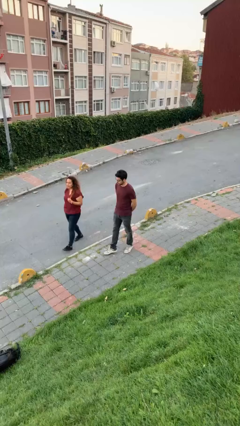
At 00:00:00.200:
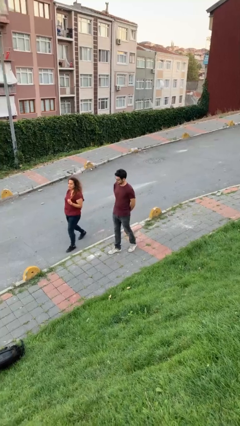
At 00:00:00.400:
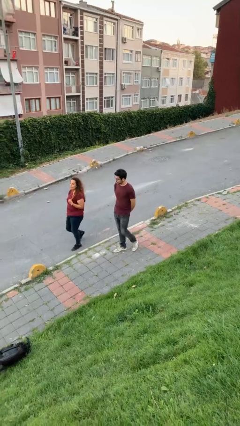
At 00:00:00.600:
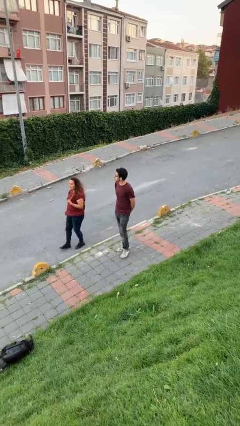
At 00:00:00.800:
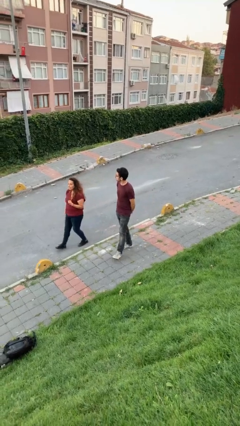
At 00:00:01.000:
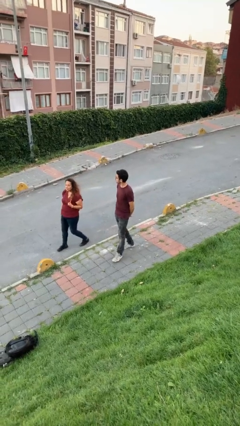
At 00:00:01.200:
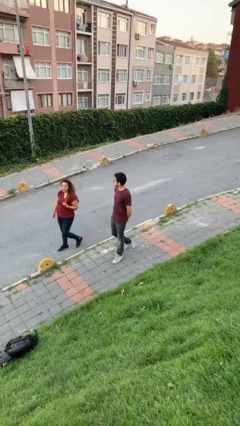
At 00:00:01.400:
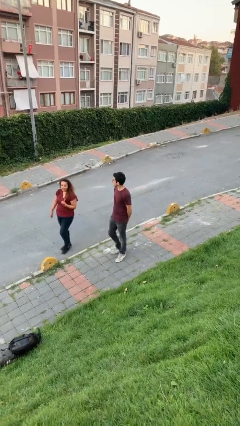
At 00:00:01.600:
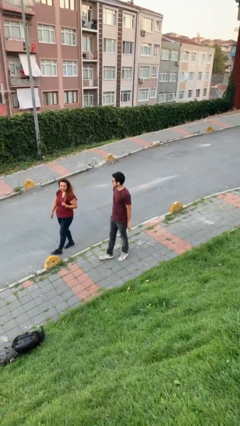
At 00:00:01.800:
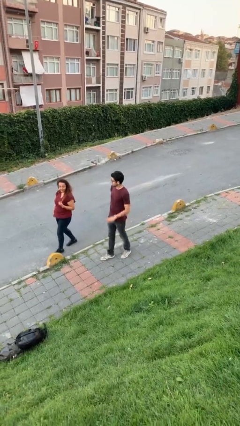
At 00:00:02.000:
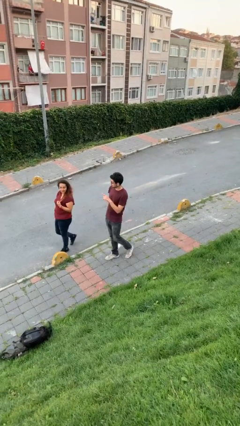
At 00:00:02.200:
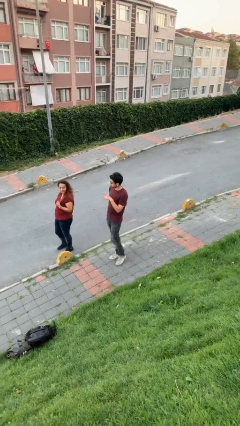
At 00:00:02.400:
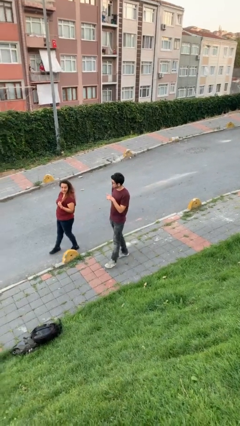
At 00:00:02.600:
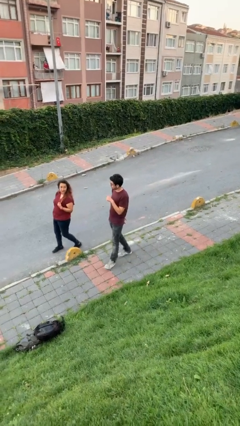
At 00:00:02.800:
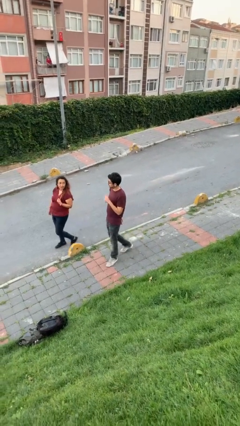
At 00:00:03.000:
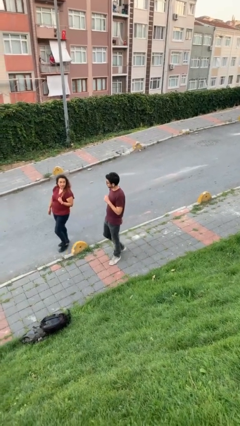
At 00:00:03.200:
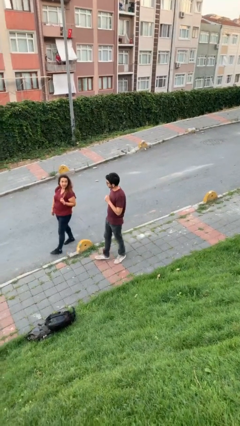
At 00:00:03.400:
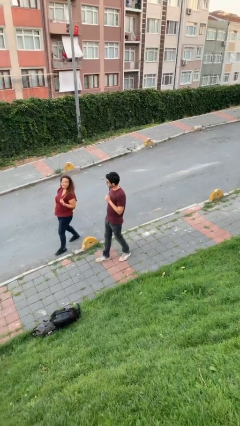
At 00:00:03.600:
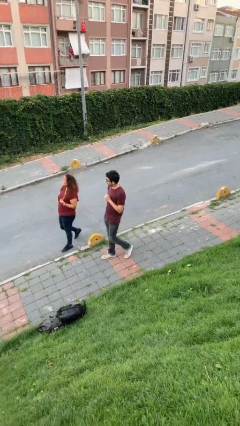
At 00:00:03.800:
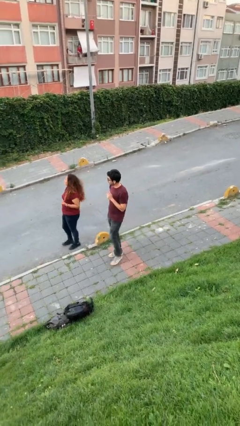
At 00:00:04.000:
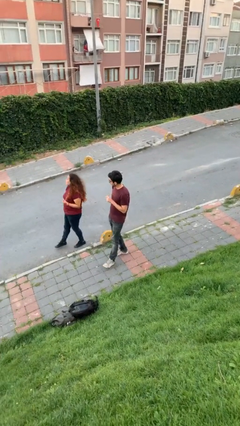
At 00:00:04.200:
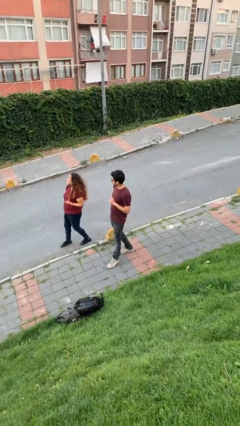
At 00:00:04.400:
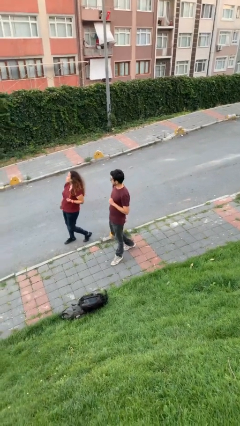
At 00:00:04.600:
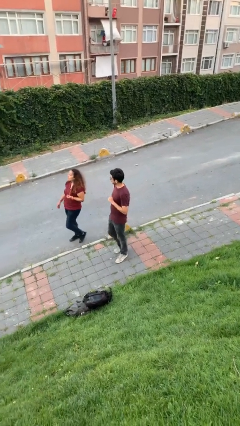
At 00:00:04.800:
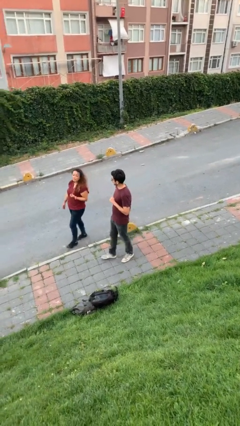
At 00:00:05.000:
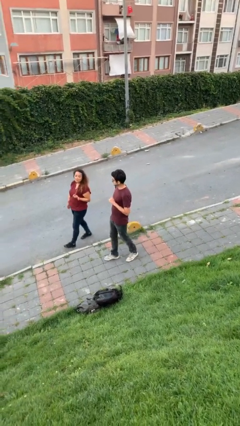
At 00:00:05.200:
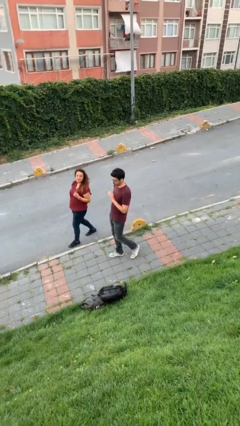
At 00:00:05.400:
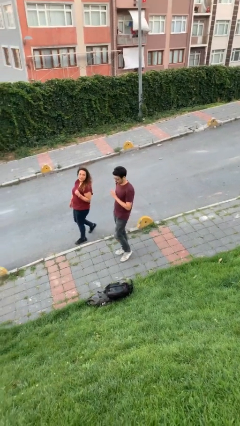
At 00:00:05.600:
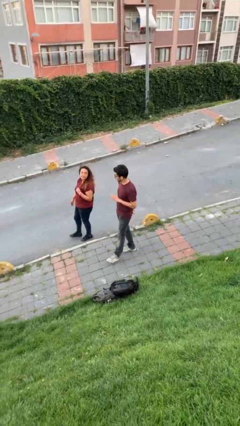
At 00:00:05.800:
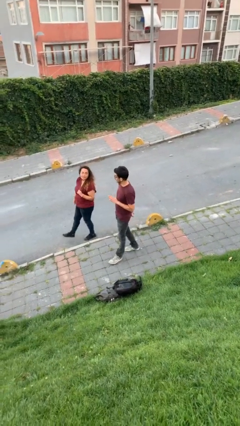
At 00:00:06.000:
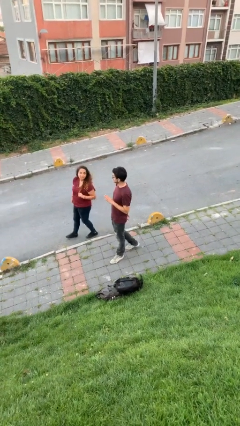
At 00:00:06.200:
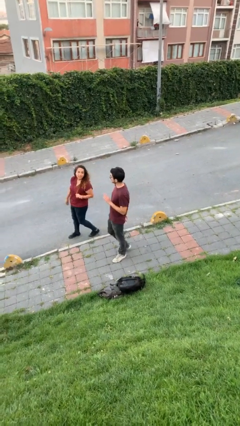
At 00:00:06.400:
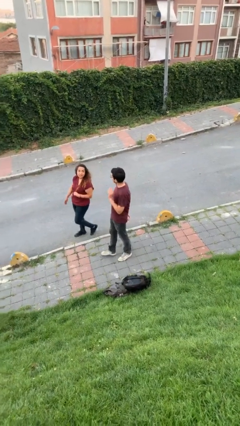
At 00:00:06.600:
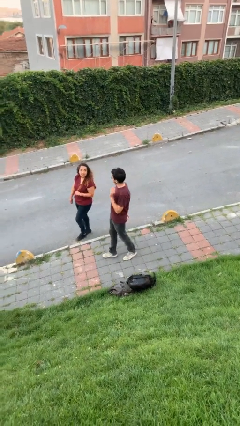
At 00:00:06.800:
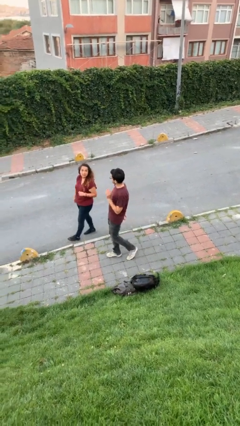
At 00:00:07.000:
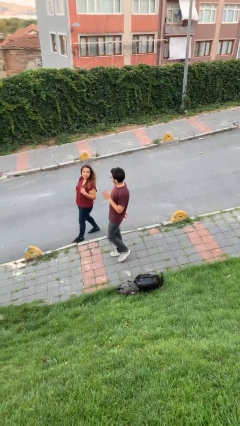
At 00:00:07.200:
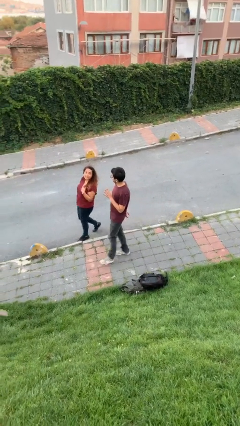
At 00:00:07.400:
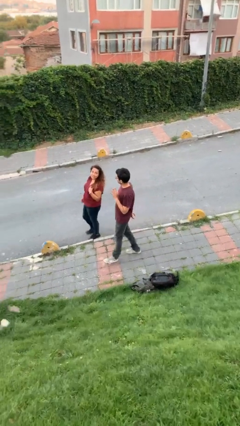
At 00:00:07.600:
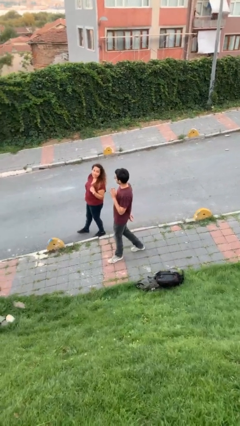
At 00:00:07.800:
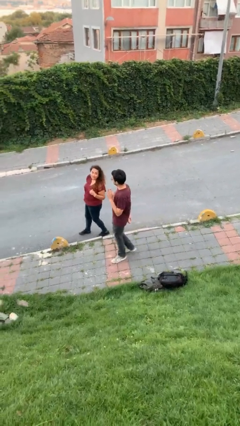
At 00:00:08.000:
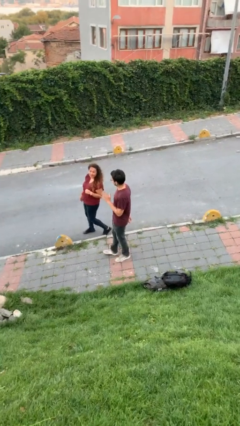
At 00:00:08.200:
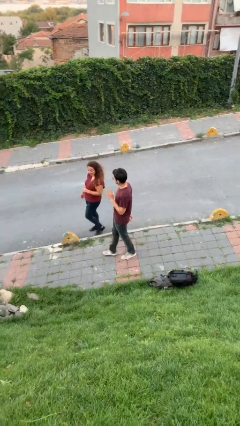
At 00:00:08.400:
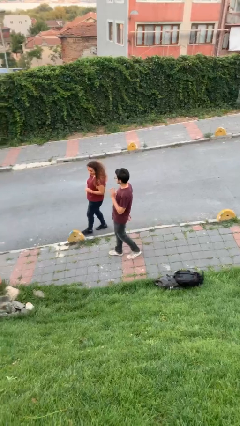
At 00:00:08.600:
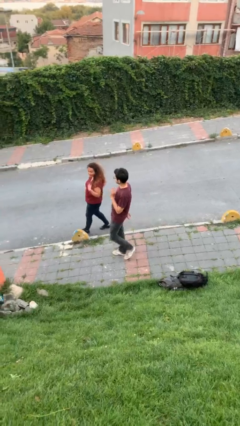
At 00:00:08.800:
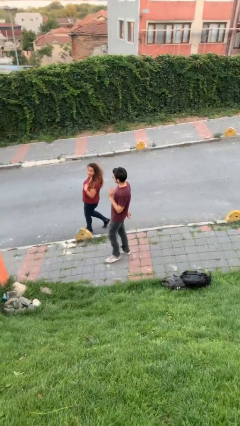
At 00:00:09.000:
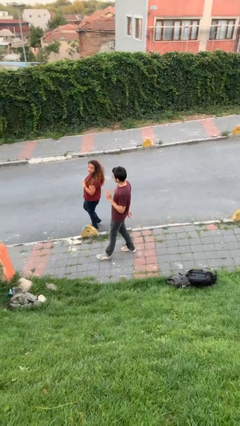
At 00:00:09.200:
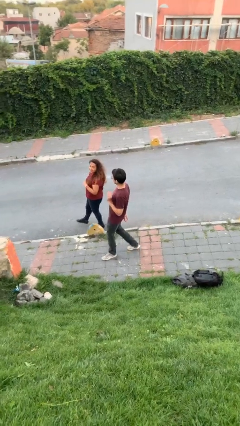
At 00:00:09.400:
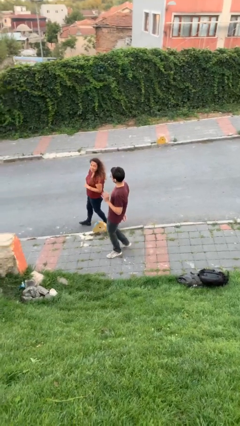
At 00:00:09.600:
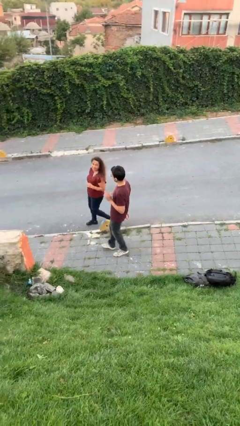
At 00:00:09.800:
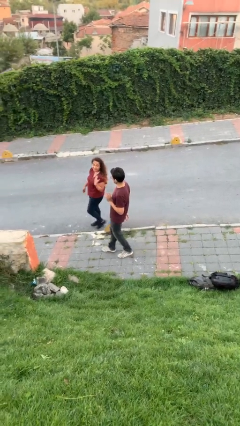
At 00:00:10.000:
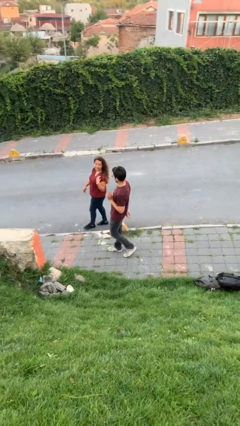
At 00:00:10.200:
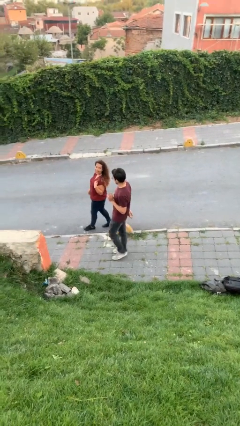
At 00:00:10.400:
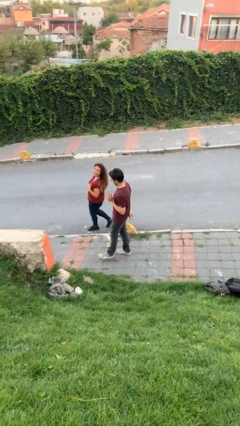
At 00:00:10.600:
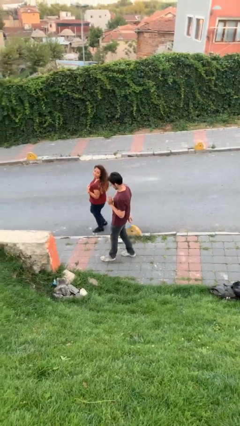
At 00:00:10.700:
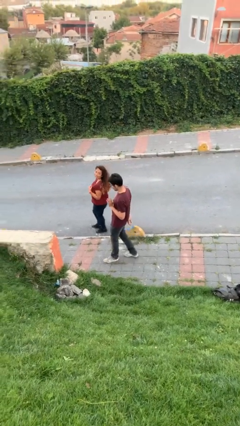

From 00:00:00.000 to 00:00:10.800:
person talks to person

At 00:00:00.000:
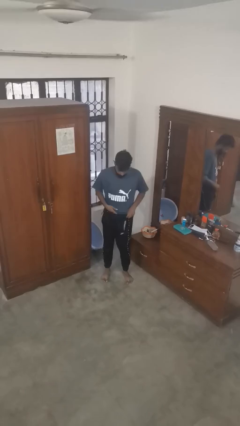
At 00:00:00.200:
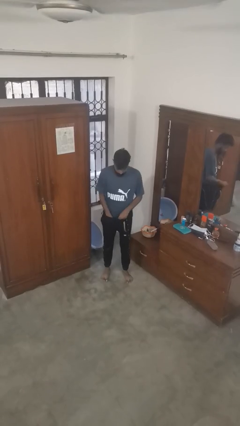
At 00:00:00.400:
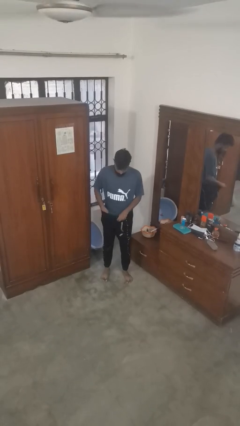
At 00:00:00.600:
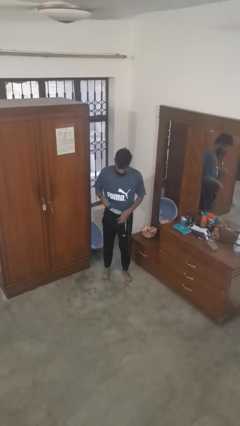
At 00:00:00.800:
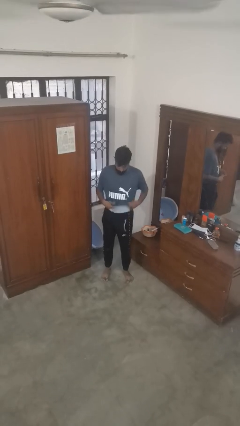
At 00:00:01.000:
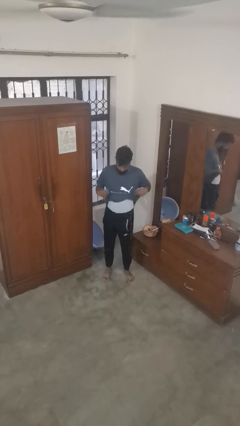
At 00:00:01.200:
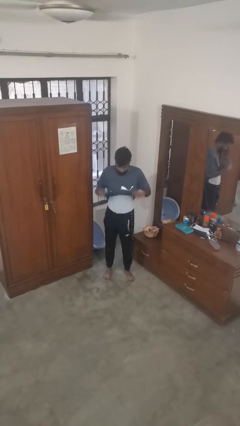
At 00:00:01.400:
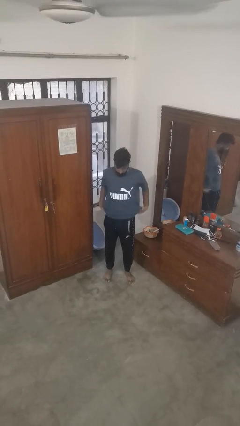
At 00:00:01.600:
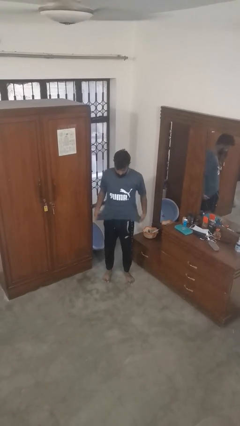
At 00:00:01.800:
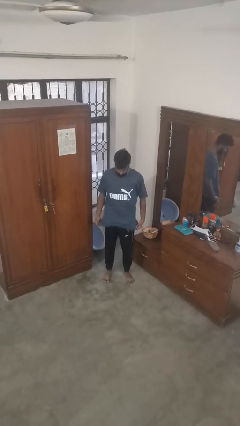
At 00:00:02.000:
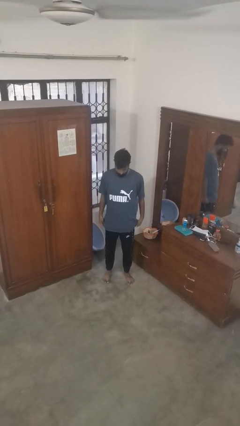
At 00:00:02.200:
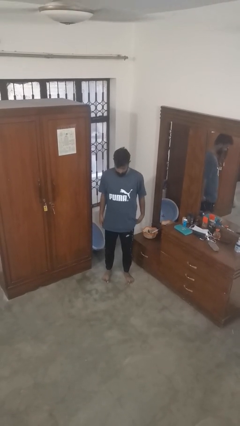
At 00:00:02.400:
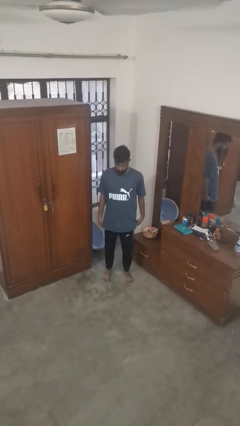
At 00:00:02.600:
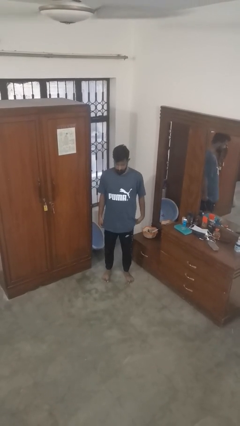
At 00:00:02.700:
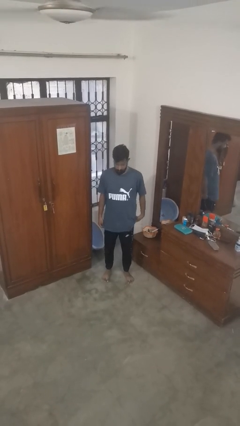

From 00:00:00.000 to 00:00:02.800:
person untucks shirt

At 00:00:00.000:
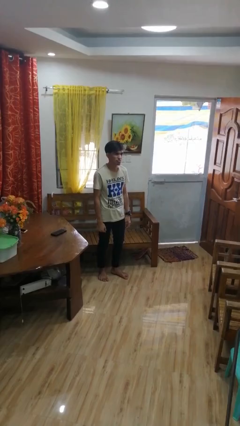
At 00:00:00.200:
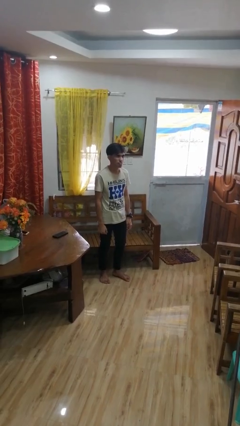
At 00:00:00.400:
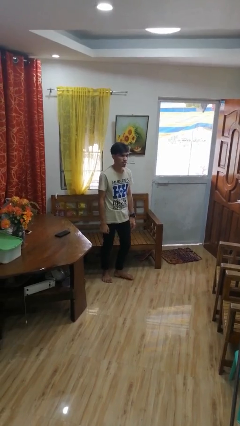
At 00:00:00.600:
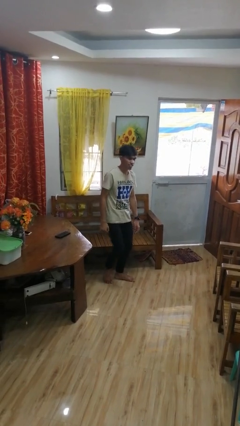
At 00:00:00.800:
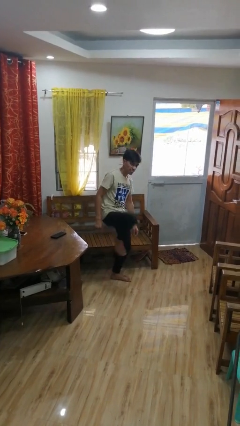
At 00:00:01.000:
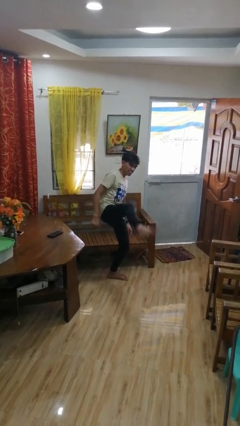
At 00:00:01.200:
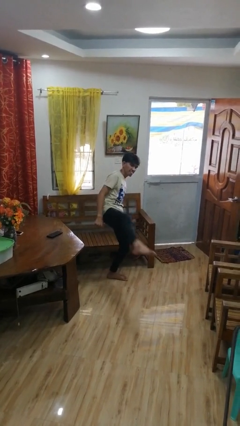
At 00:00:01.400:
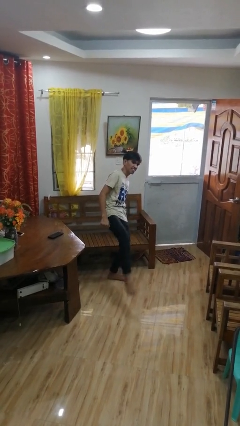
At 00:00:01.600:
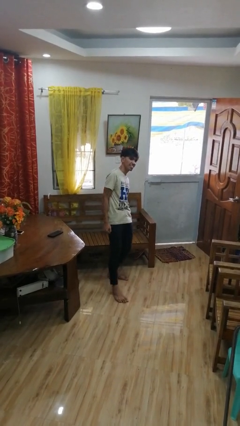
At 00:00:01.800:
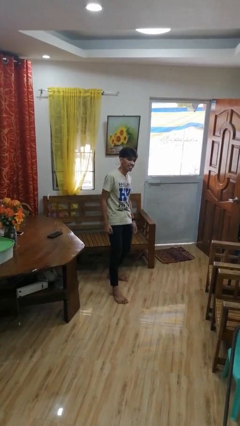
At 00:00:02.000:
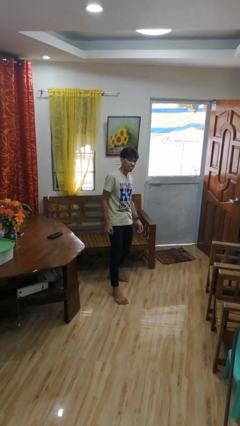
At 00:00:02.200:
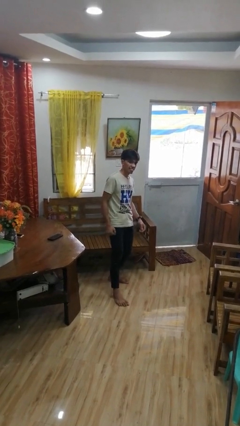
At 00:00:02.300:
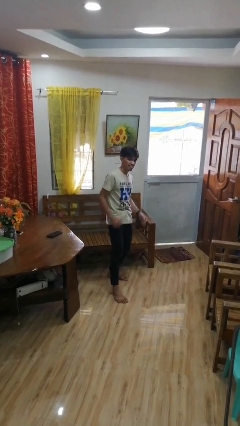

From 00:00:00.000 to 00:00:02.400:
person karate kicks

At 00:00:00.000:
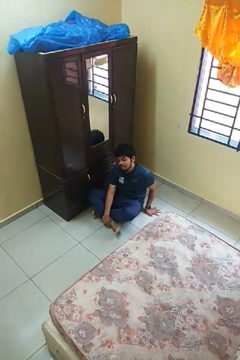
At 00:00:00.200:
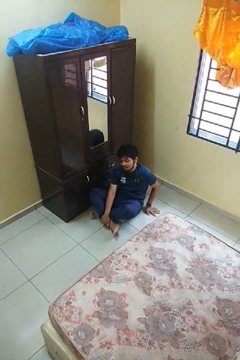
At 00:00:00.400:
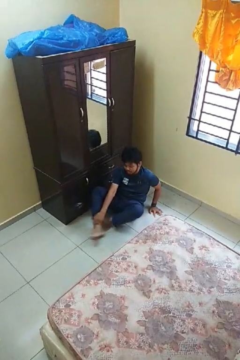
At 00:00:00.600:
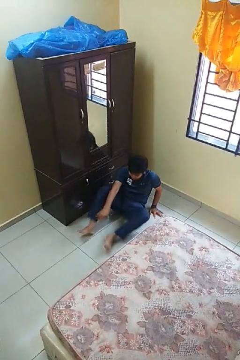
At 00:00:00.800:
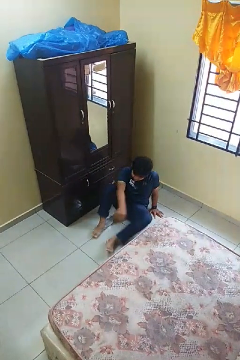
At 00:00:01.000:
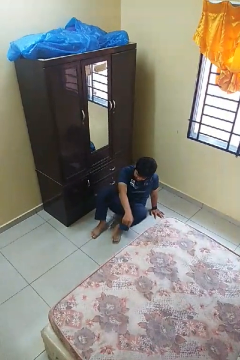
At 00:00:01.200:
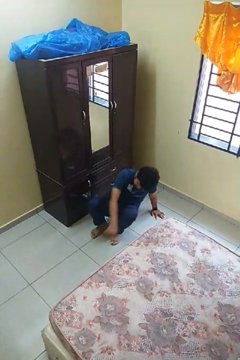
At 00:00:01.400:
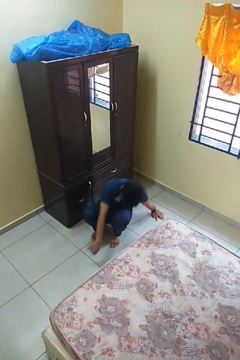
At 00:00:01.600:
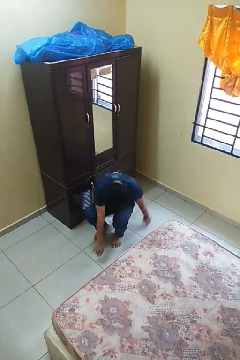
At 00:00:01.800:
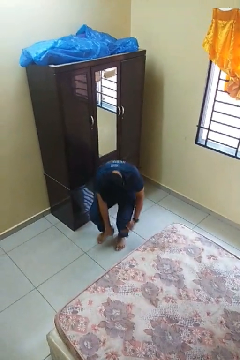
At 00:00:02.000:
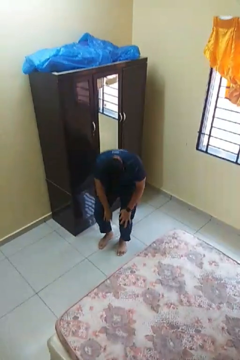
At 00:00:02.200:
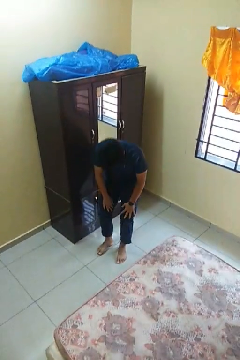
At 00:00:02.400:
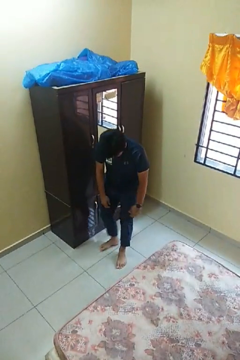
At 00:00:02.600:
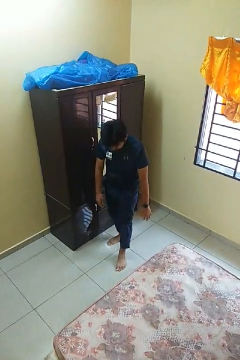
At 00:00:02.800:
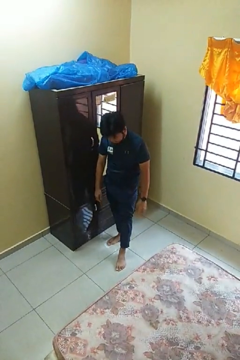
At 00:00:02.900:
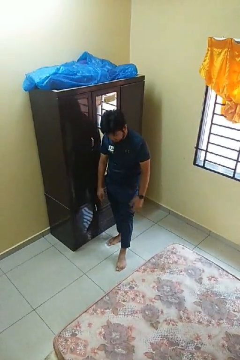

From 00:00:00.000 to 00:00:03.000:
person stands up from floor
